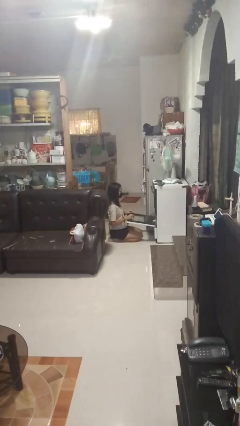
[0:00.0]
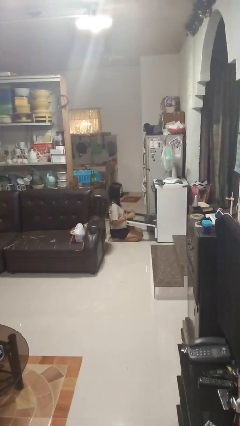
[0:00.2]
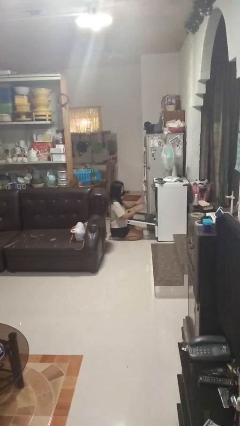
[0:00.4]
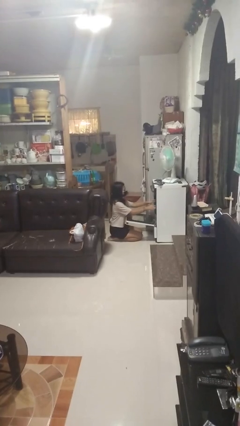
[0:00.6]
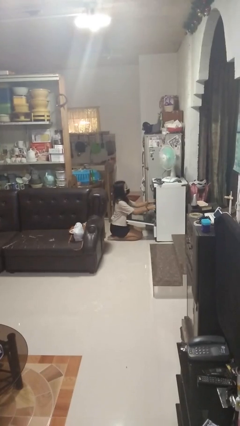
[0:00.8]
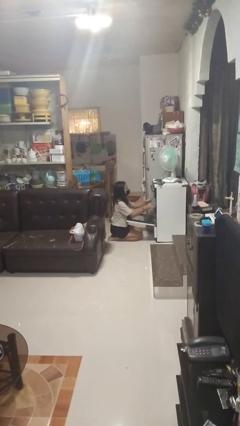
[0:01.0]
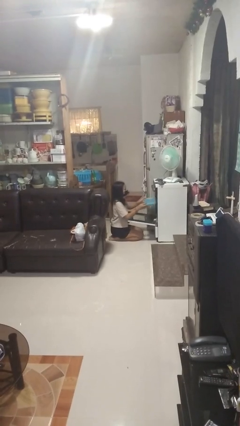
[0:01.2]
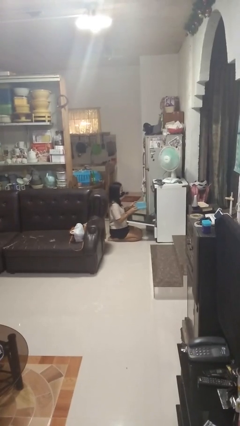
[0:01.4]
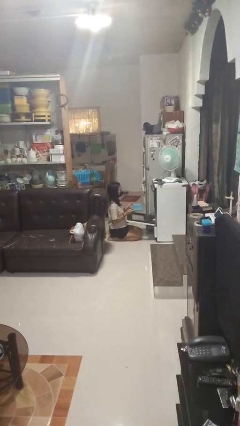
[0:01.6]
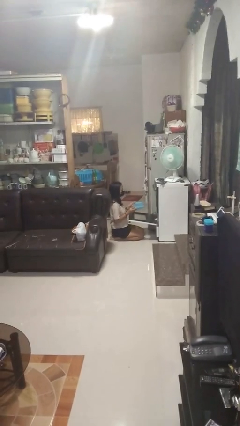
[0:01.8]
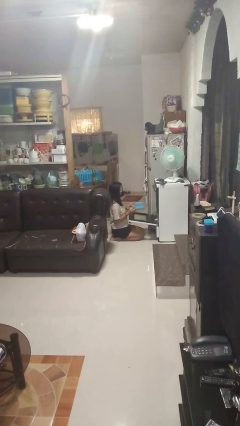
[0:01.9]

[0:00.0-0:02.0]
person takes object from oven

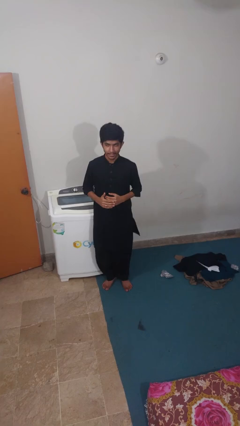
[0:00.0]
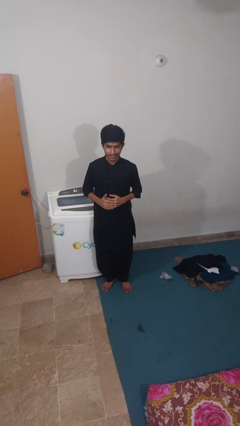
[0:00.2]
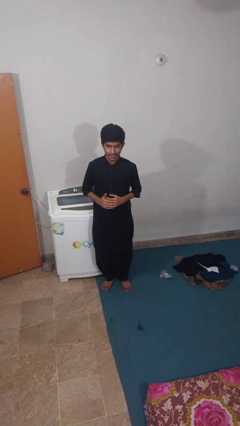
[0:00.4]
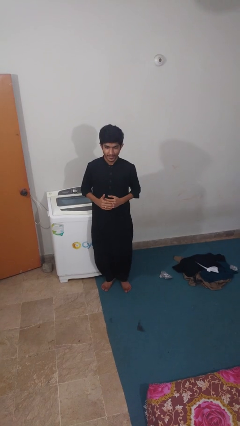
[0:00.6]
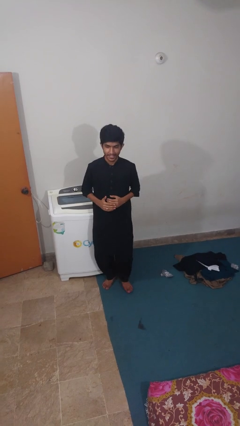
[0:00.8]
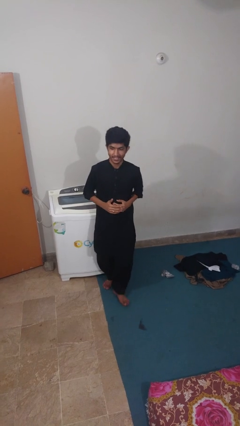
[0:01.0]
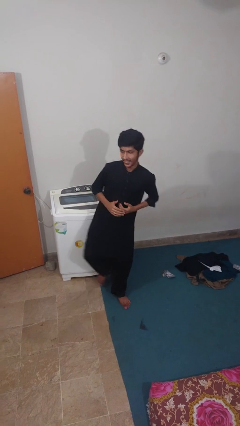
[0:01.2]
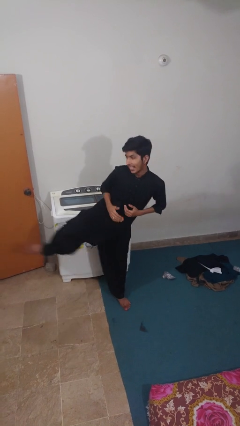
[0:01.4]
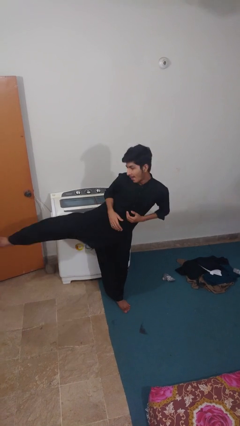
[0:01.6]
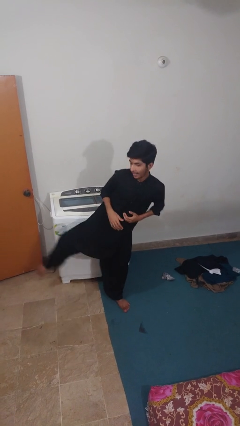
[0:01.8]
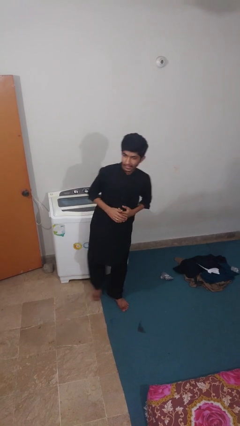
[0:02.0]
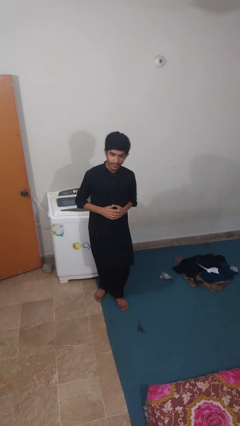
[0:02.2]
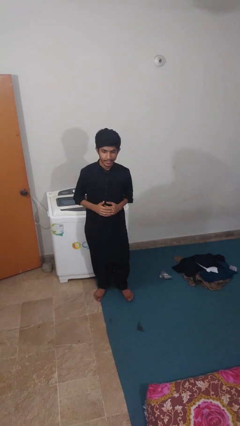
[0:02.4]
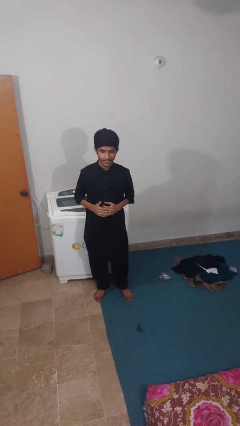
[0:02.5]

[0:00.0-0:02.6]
person karate kicks

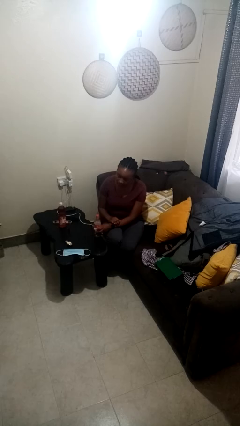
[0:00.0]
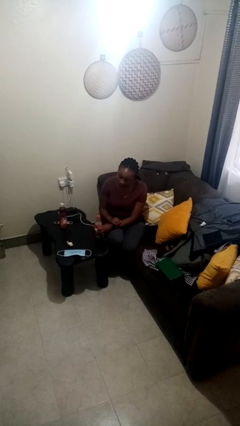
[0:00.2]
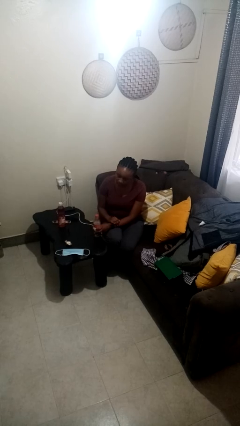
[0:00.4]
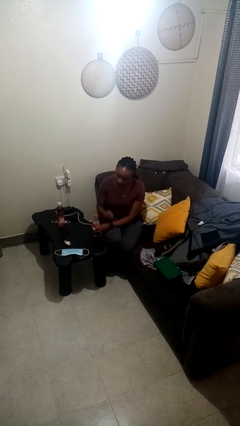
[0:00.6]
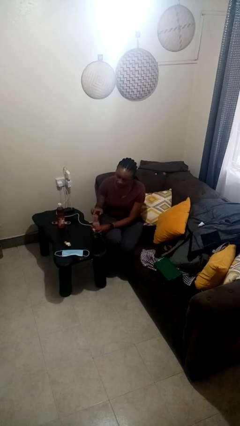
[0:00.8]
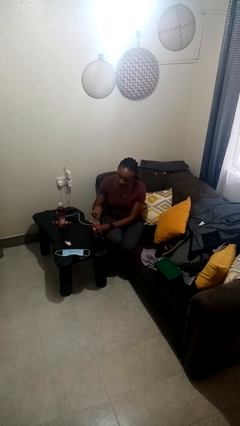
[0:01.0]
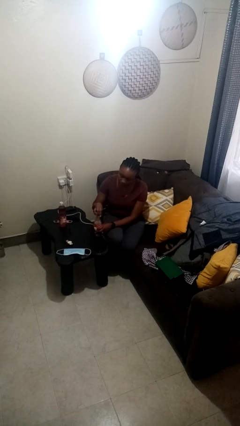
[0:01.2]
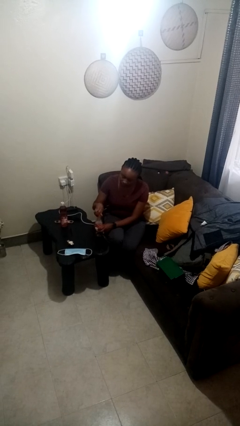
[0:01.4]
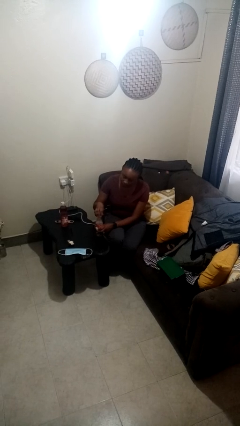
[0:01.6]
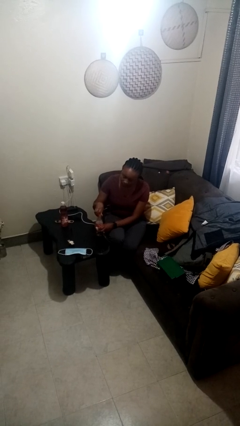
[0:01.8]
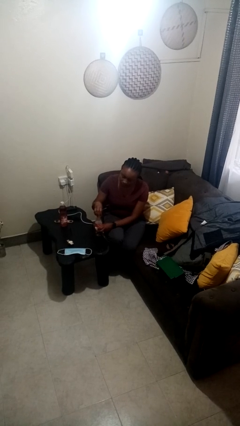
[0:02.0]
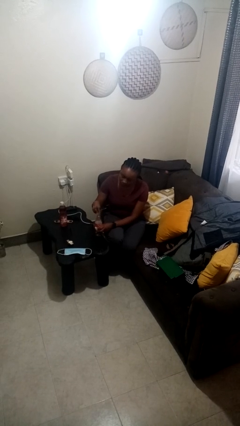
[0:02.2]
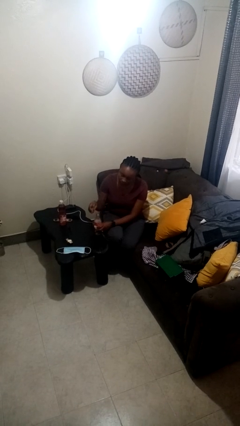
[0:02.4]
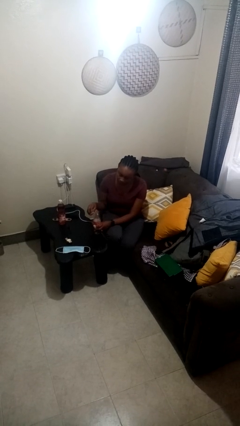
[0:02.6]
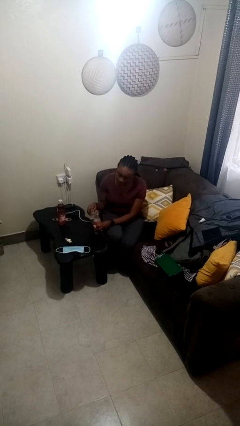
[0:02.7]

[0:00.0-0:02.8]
person unscrews lid from bottle

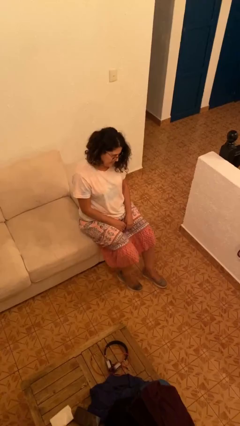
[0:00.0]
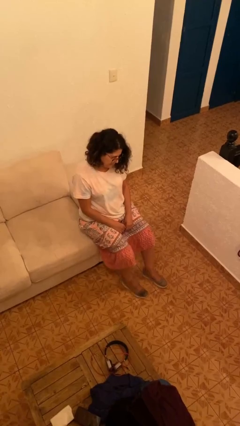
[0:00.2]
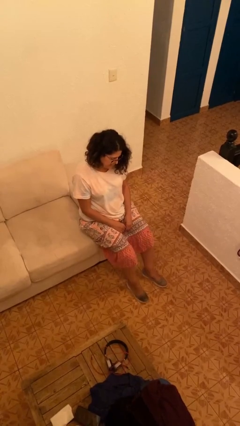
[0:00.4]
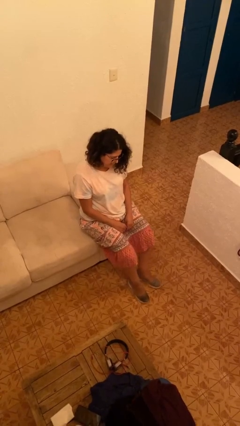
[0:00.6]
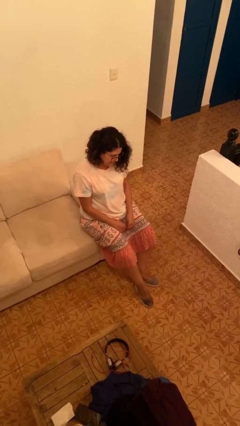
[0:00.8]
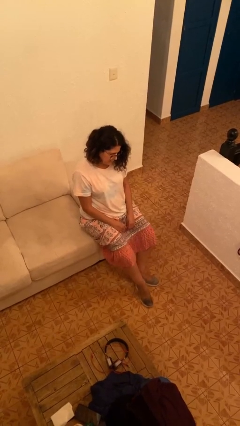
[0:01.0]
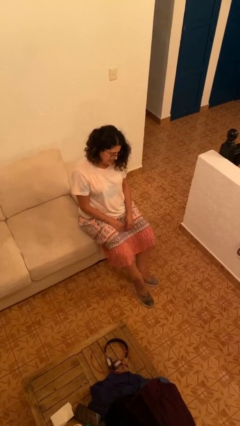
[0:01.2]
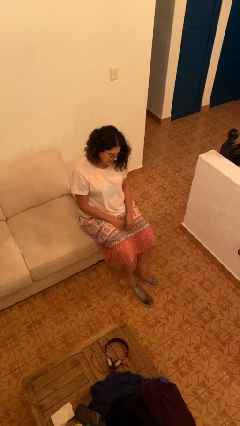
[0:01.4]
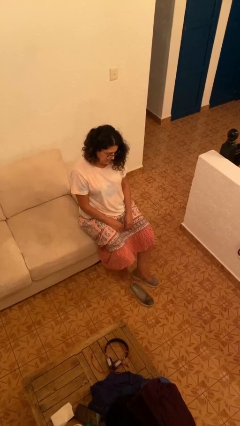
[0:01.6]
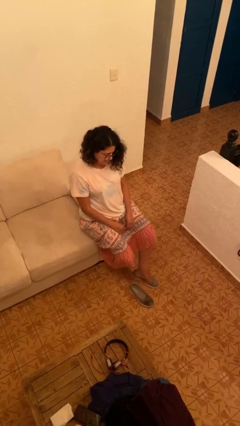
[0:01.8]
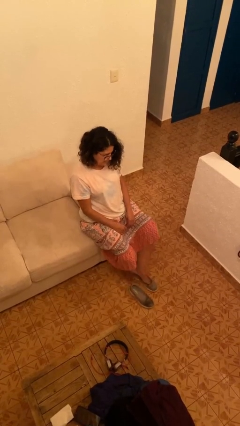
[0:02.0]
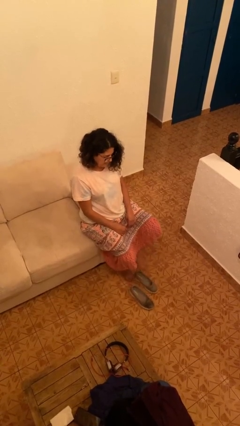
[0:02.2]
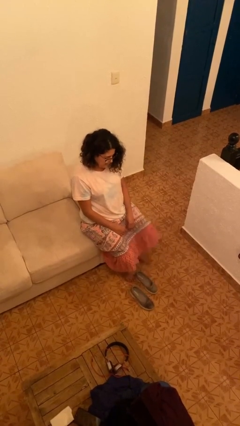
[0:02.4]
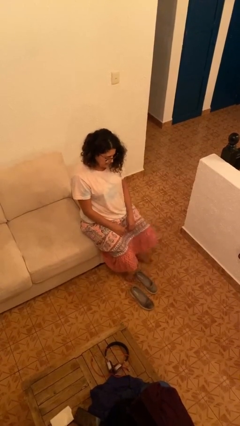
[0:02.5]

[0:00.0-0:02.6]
person takes off shoes

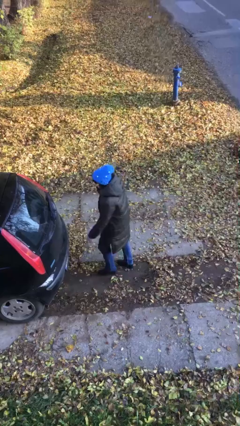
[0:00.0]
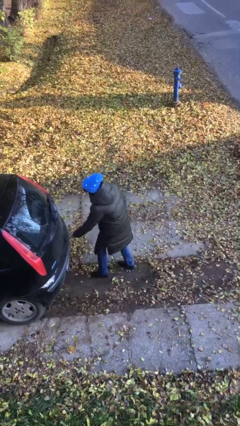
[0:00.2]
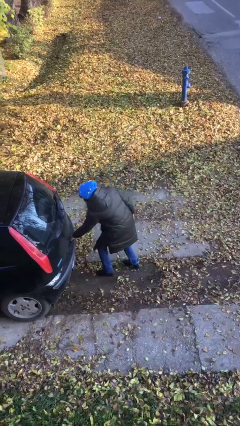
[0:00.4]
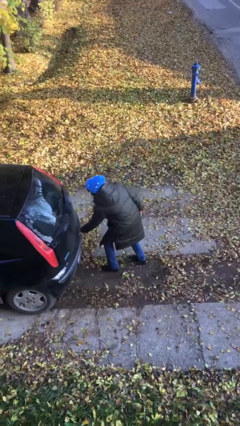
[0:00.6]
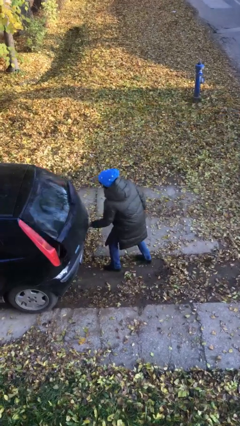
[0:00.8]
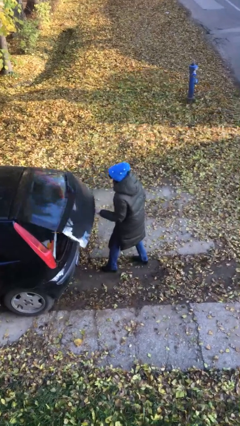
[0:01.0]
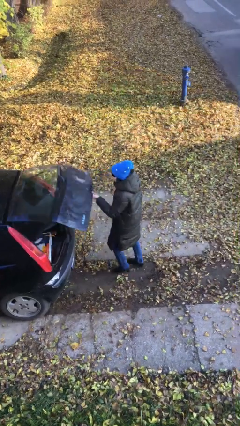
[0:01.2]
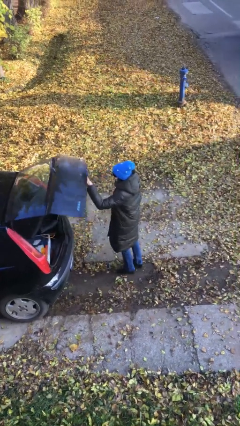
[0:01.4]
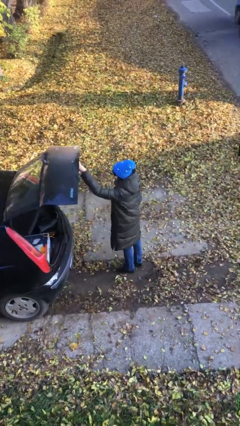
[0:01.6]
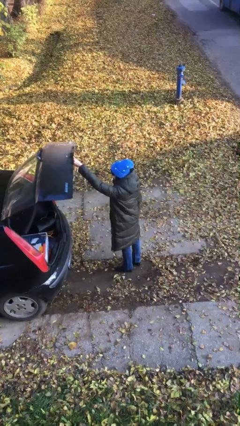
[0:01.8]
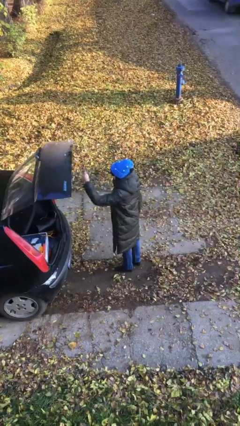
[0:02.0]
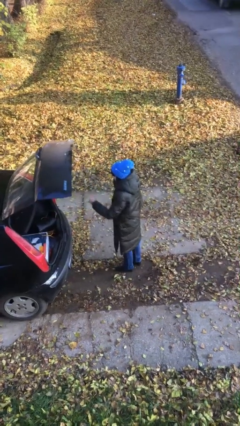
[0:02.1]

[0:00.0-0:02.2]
person opens car trunk

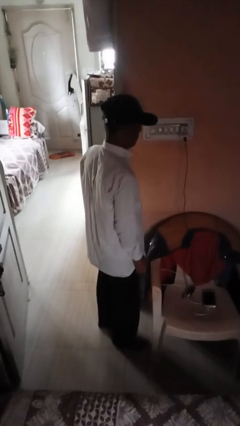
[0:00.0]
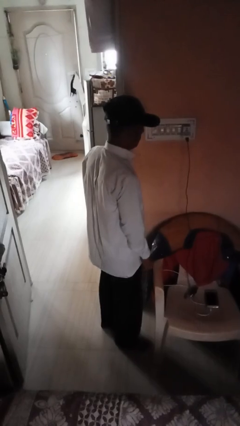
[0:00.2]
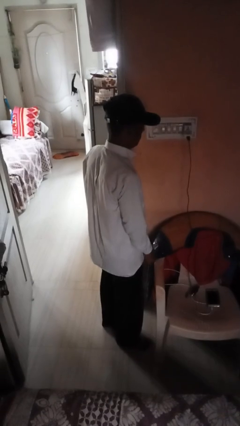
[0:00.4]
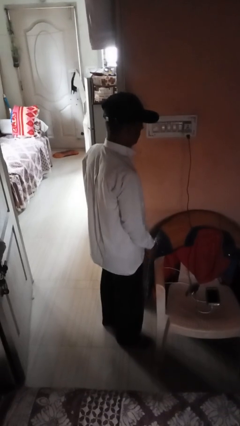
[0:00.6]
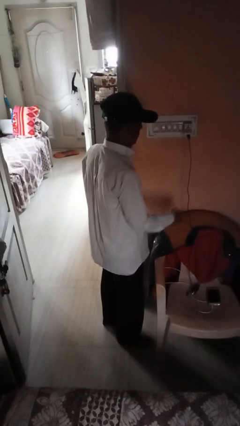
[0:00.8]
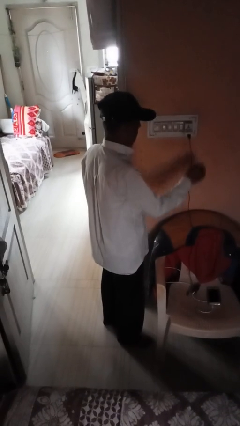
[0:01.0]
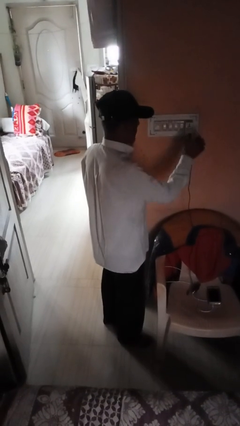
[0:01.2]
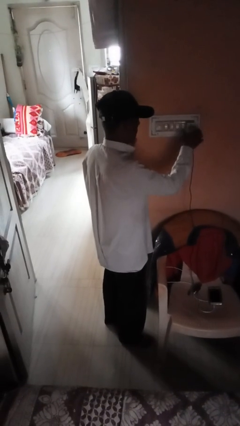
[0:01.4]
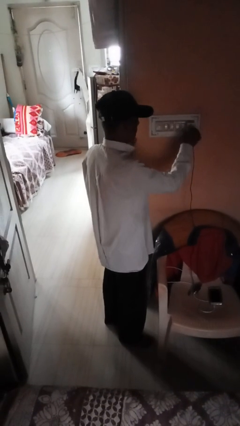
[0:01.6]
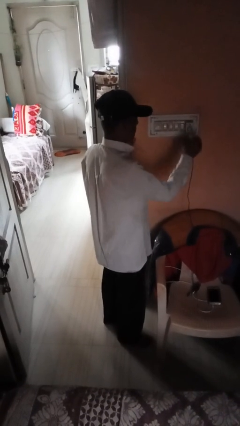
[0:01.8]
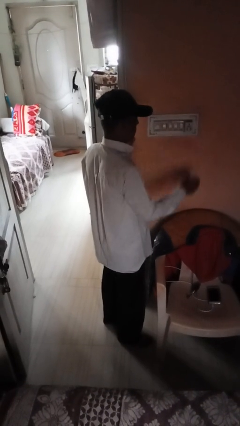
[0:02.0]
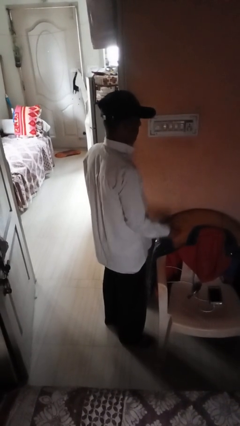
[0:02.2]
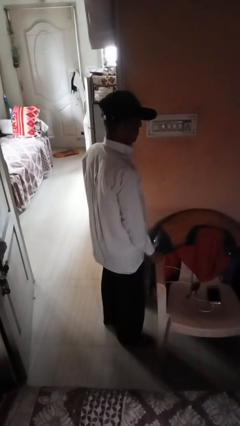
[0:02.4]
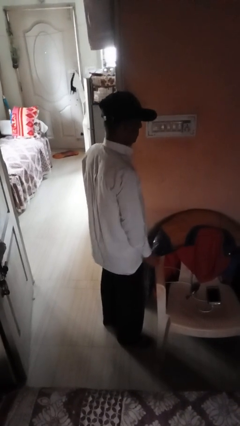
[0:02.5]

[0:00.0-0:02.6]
person unplugs from electrical socket

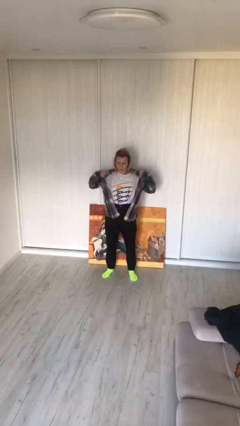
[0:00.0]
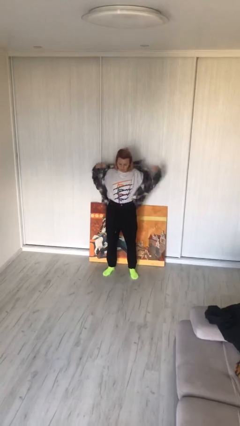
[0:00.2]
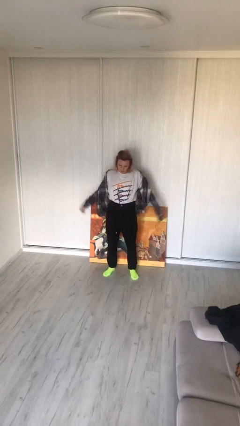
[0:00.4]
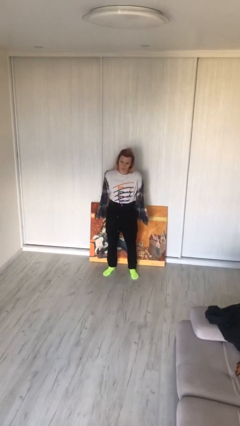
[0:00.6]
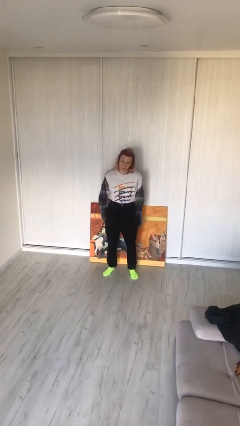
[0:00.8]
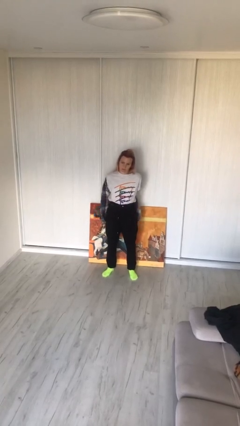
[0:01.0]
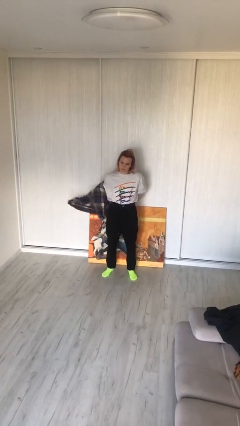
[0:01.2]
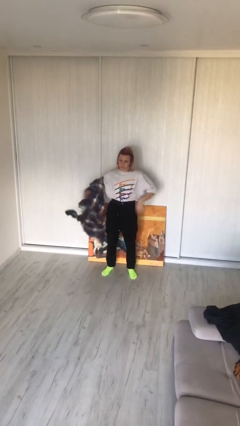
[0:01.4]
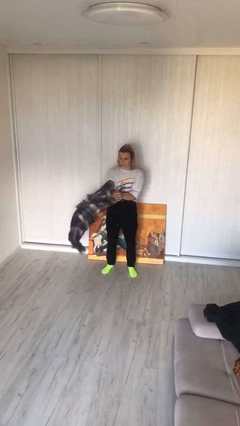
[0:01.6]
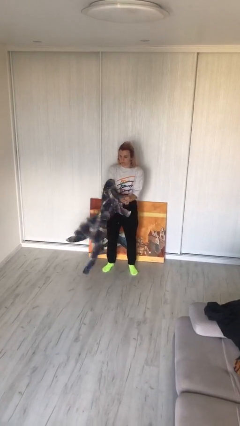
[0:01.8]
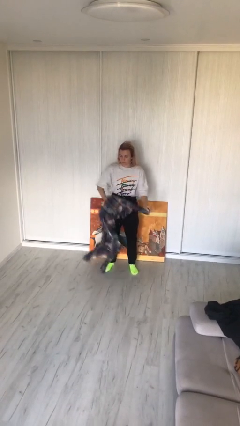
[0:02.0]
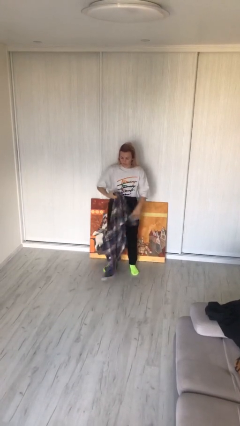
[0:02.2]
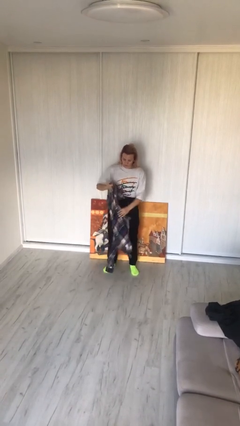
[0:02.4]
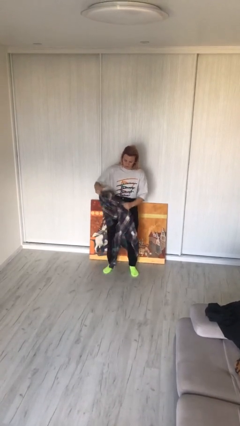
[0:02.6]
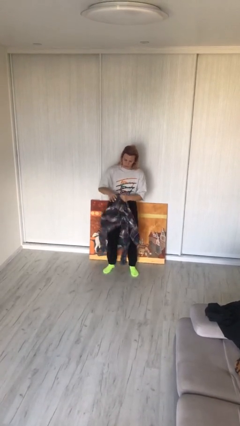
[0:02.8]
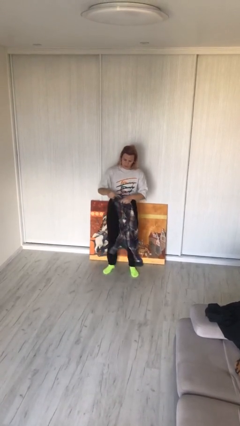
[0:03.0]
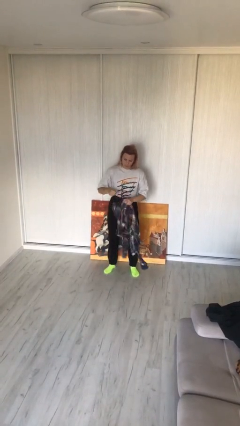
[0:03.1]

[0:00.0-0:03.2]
person takes off shirt
